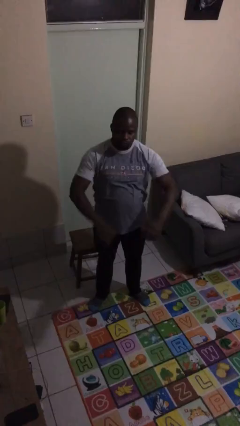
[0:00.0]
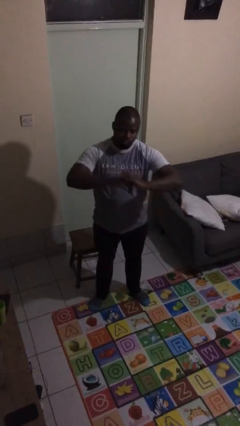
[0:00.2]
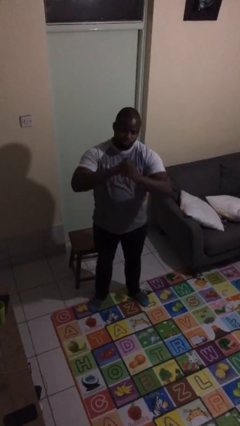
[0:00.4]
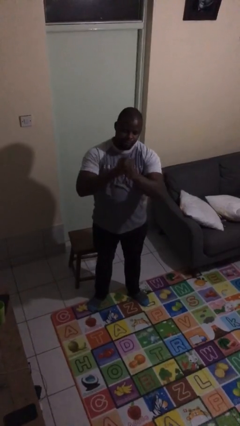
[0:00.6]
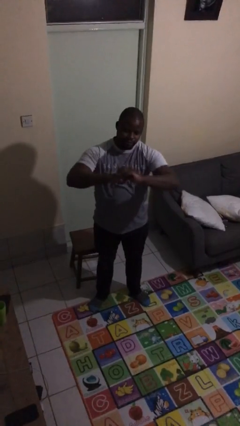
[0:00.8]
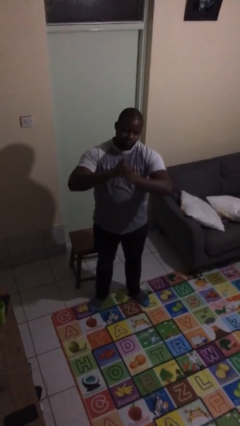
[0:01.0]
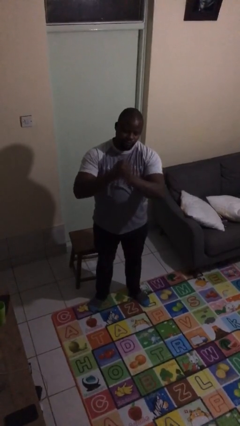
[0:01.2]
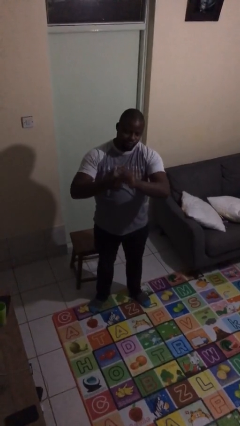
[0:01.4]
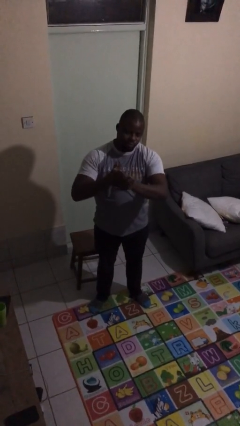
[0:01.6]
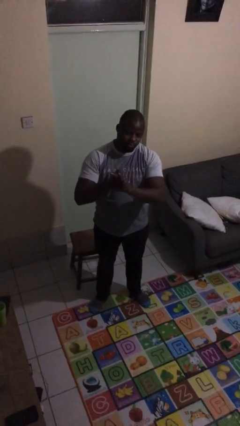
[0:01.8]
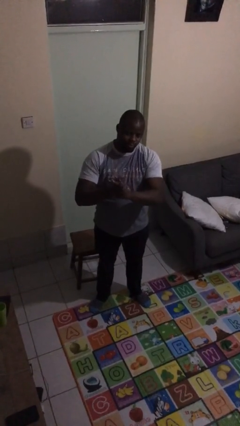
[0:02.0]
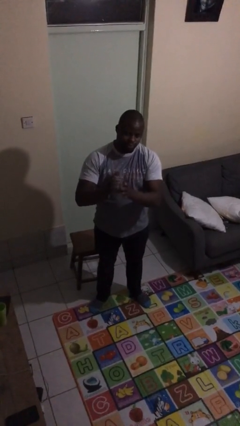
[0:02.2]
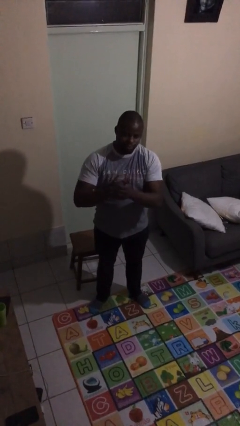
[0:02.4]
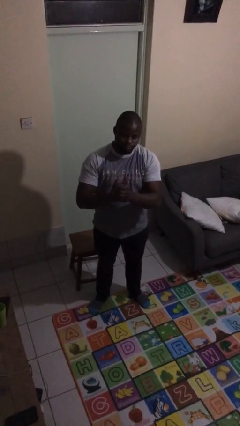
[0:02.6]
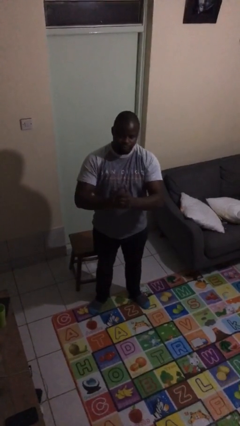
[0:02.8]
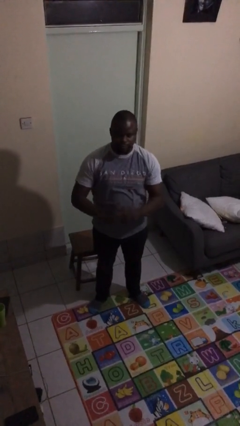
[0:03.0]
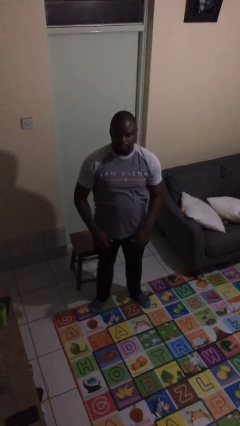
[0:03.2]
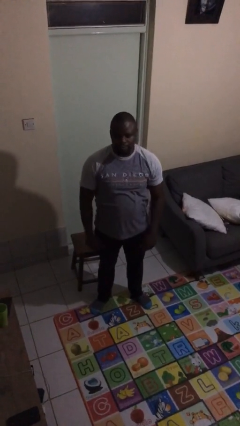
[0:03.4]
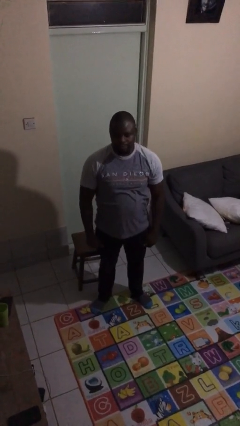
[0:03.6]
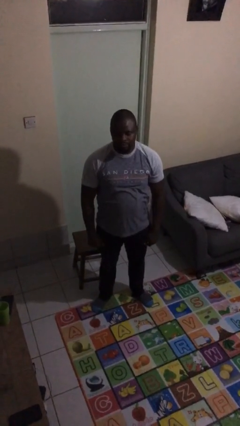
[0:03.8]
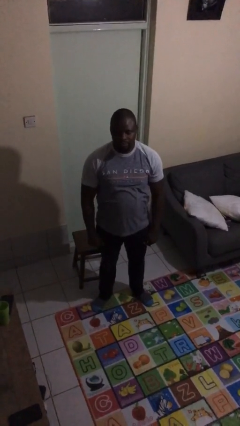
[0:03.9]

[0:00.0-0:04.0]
person cracks knuckles

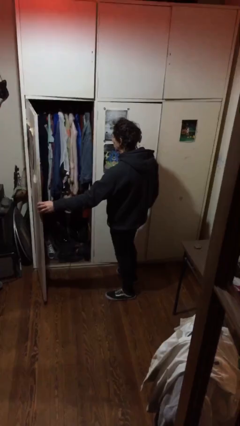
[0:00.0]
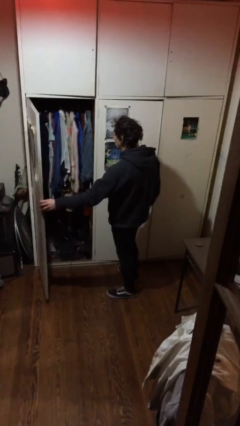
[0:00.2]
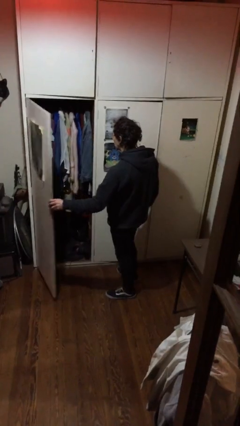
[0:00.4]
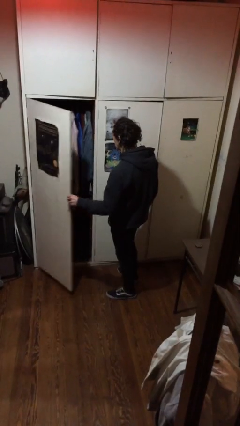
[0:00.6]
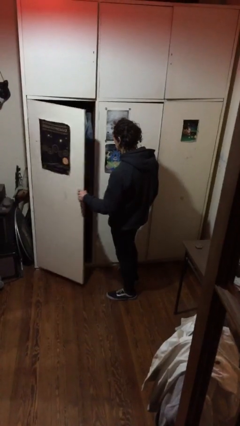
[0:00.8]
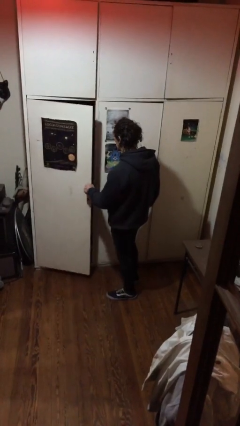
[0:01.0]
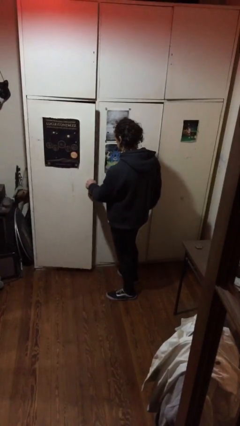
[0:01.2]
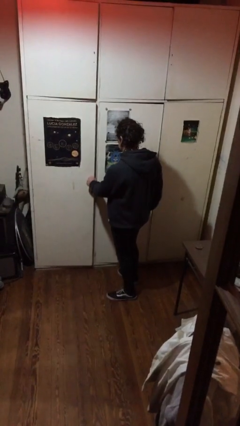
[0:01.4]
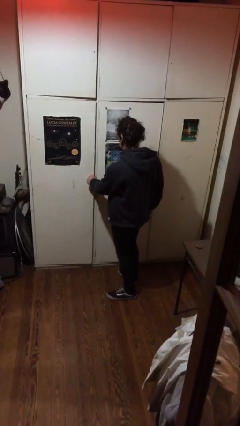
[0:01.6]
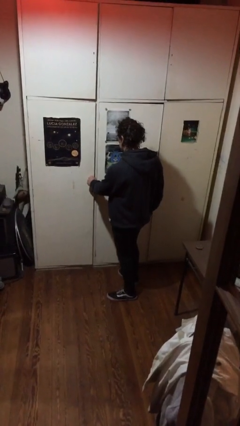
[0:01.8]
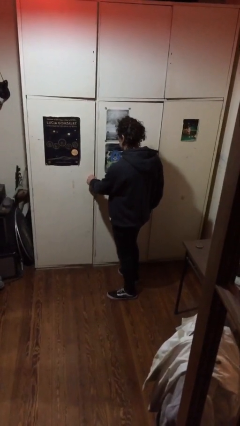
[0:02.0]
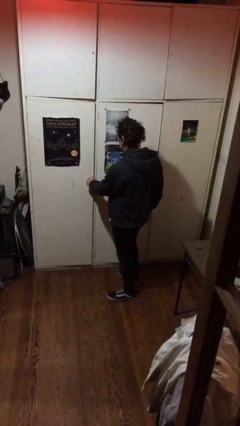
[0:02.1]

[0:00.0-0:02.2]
person closes closet door

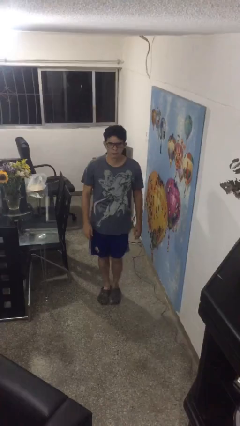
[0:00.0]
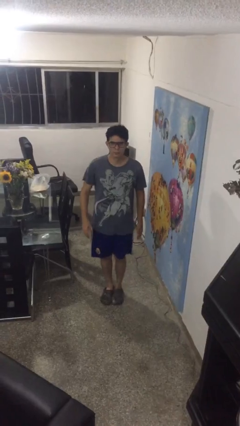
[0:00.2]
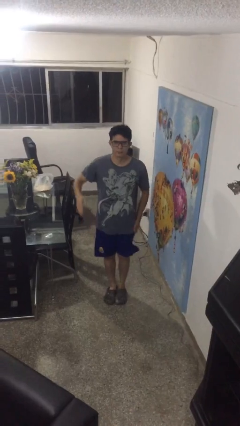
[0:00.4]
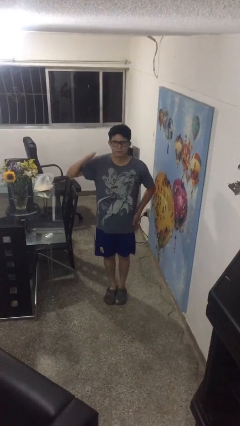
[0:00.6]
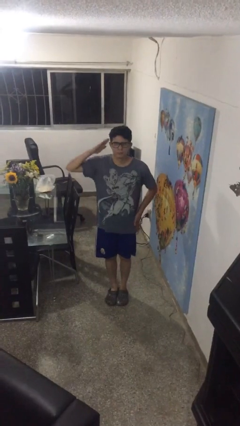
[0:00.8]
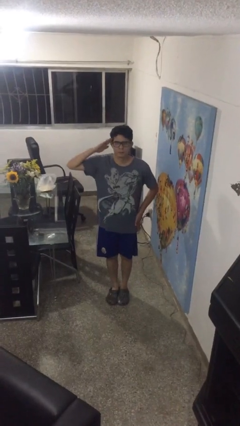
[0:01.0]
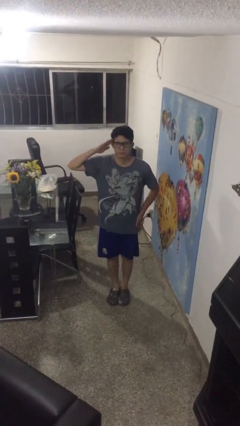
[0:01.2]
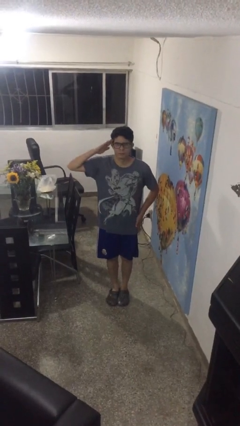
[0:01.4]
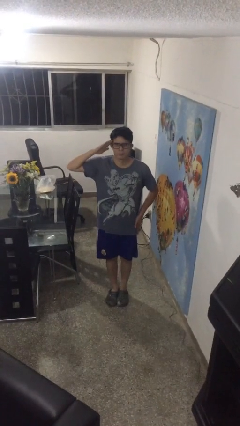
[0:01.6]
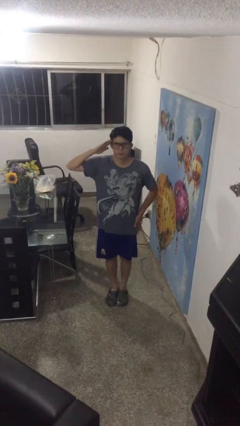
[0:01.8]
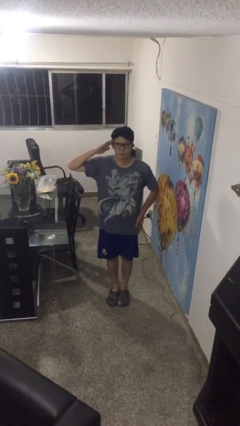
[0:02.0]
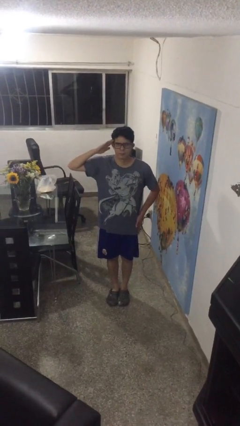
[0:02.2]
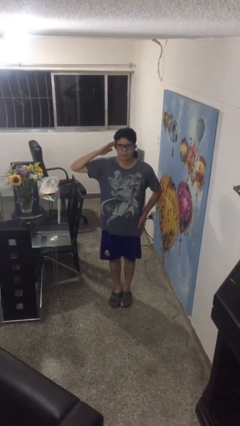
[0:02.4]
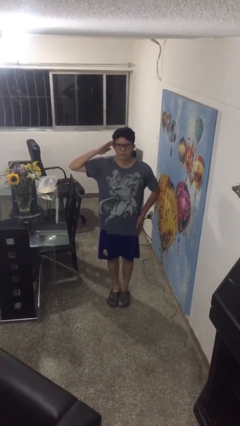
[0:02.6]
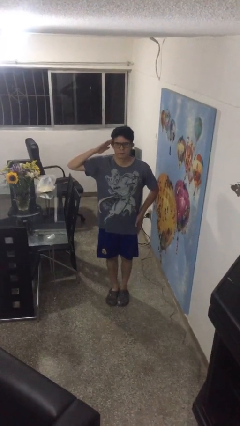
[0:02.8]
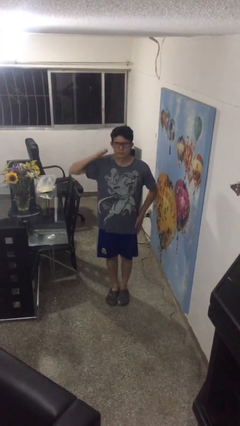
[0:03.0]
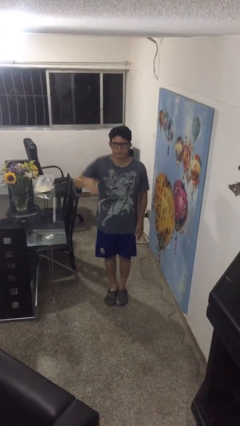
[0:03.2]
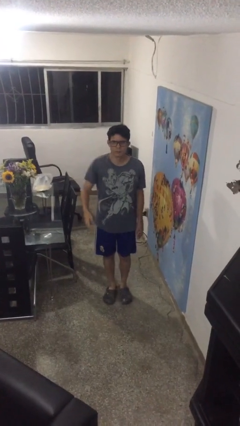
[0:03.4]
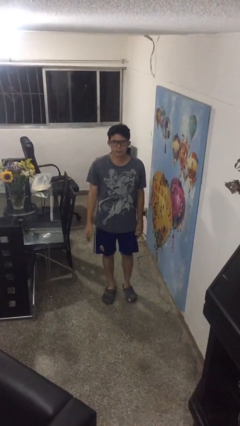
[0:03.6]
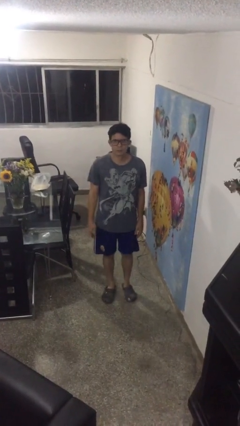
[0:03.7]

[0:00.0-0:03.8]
person salutes

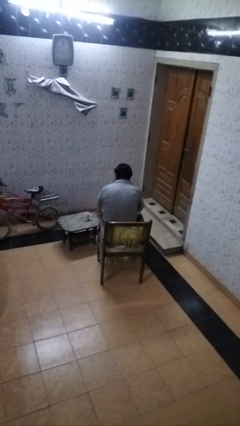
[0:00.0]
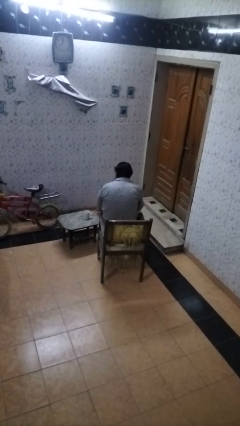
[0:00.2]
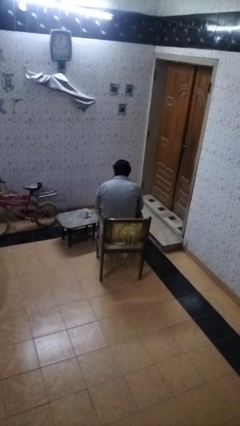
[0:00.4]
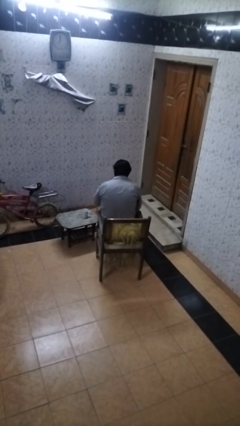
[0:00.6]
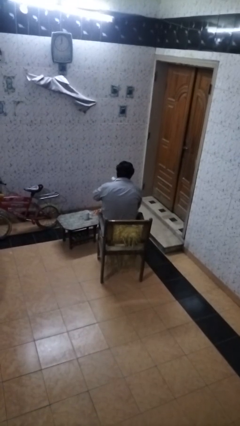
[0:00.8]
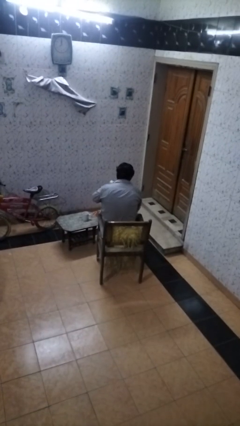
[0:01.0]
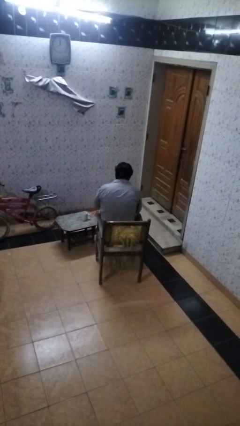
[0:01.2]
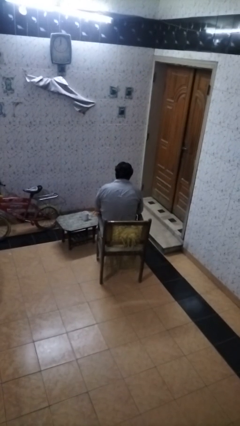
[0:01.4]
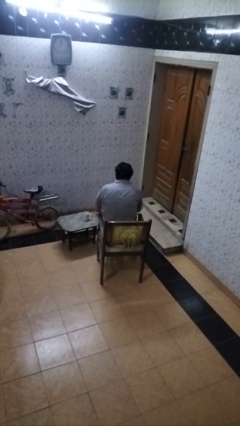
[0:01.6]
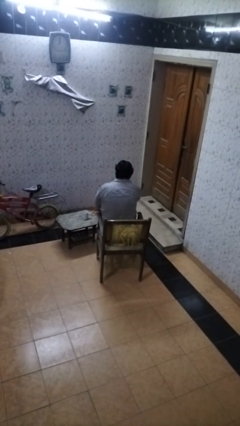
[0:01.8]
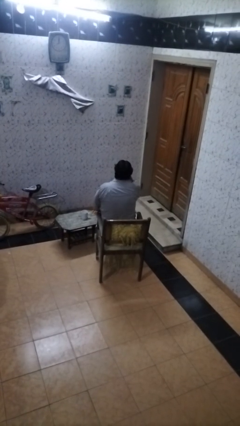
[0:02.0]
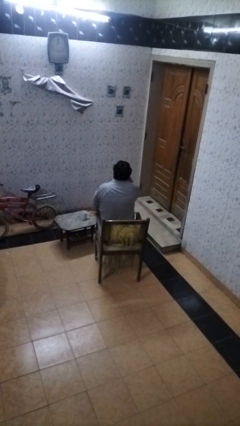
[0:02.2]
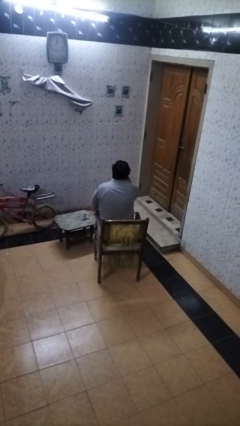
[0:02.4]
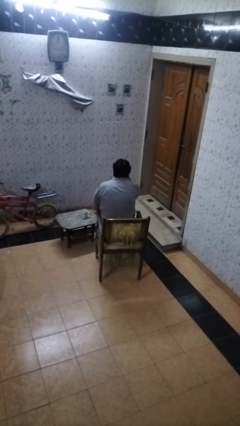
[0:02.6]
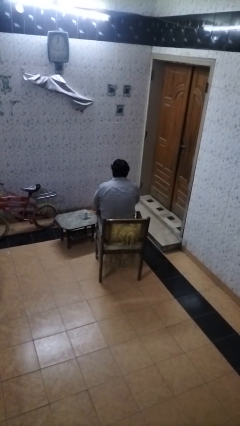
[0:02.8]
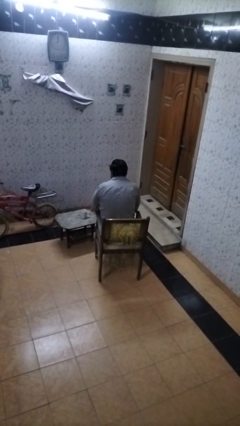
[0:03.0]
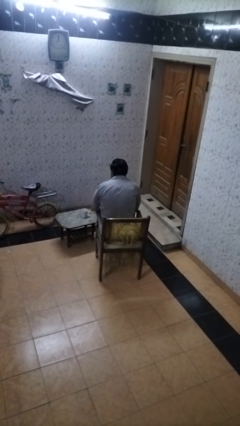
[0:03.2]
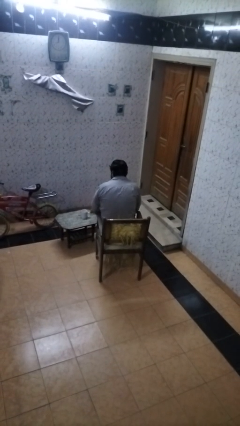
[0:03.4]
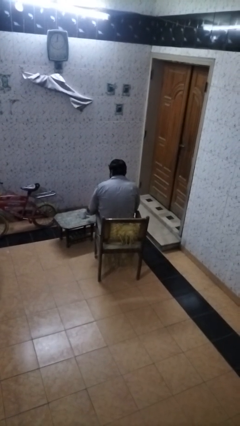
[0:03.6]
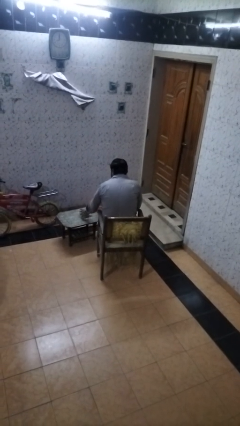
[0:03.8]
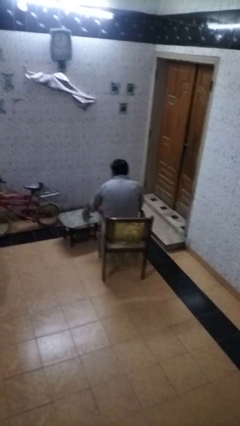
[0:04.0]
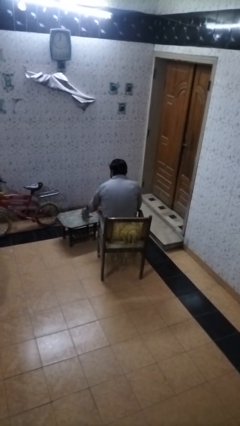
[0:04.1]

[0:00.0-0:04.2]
person takes medicine pills

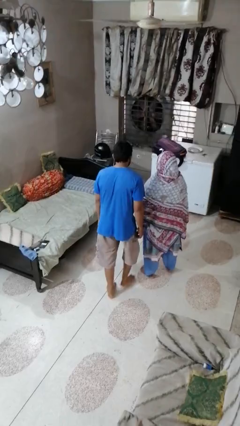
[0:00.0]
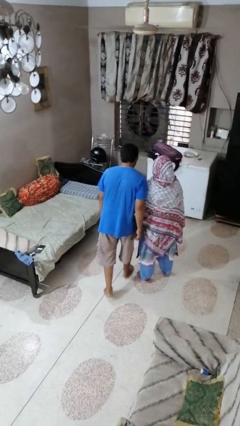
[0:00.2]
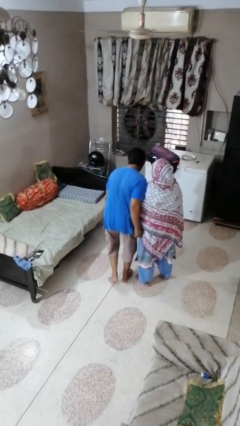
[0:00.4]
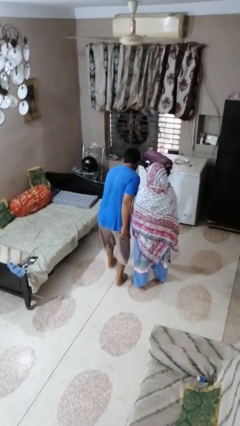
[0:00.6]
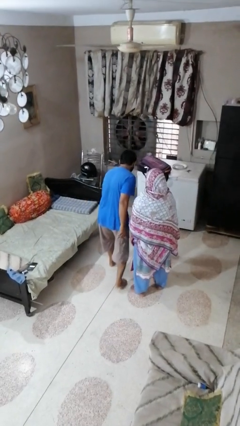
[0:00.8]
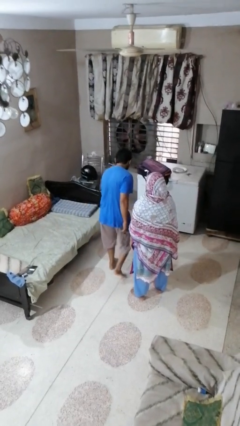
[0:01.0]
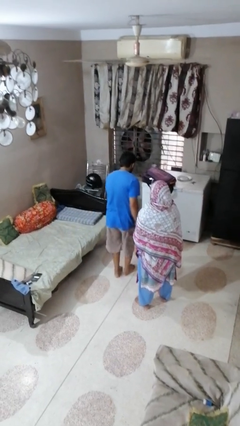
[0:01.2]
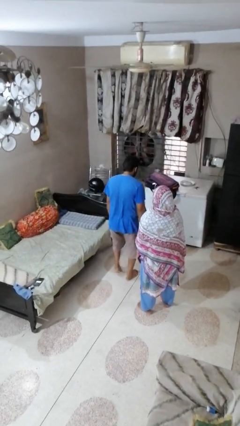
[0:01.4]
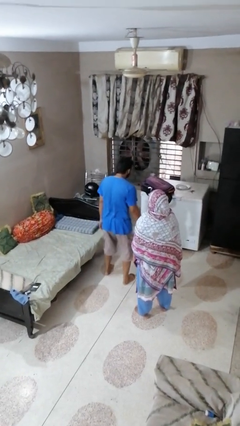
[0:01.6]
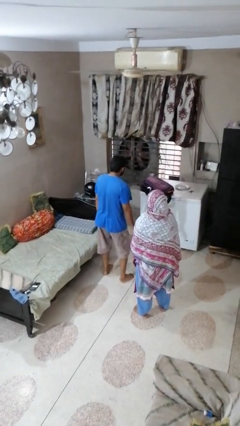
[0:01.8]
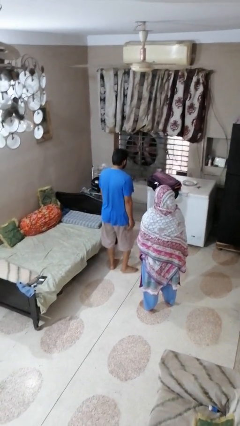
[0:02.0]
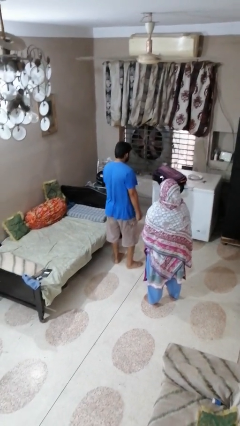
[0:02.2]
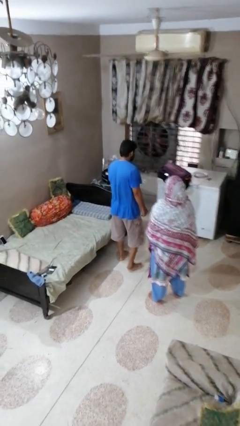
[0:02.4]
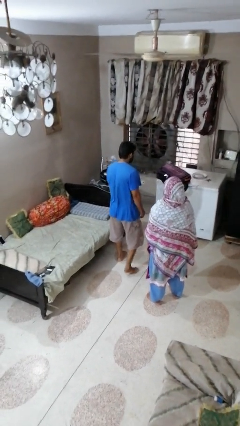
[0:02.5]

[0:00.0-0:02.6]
person bumps into person

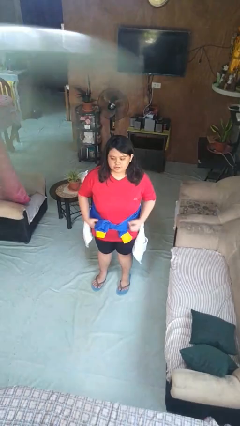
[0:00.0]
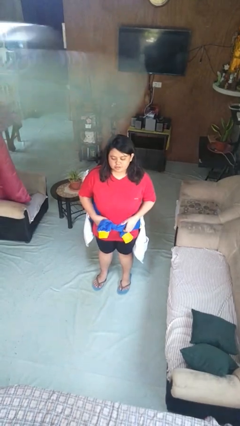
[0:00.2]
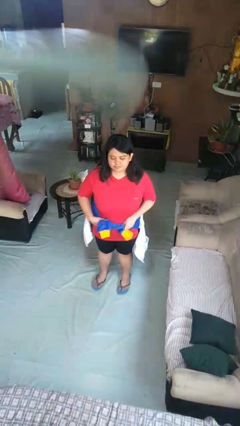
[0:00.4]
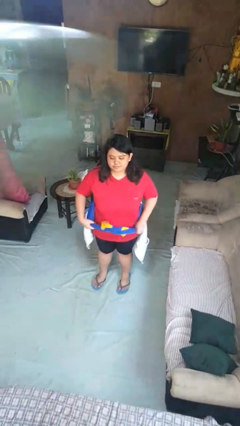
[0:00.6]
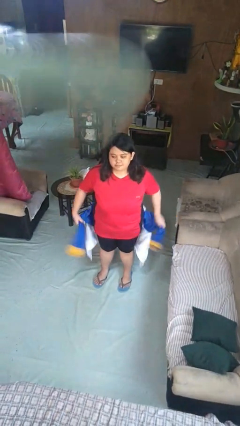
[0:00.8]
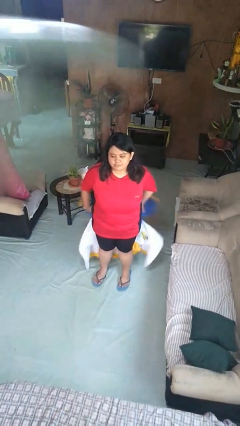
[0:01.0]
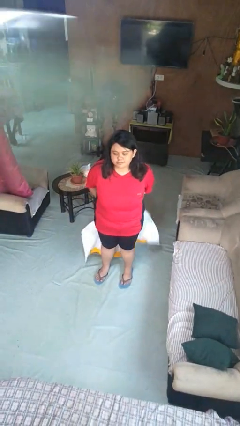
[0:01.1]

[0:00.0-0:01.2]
person unties jacket around waist
